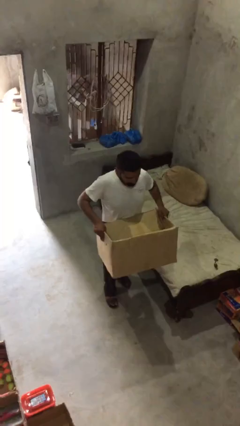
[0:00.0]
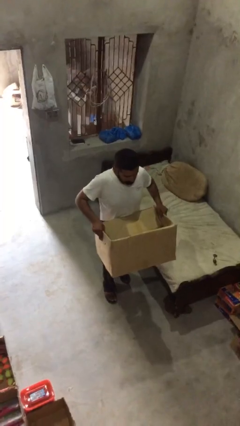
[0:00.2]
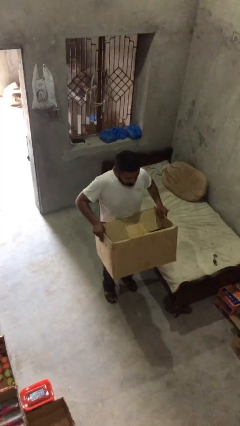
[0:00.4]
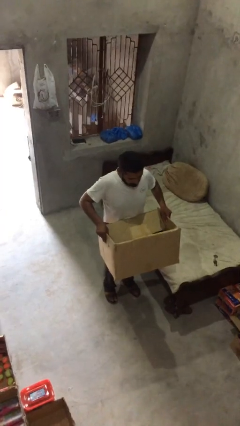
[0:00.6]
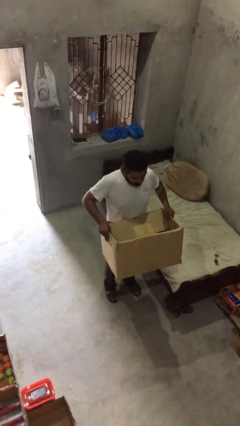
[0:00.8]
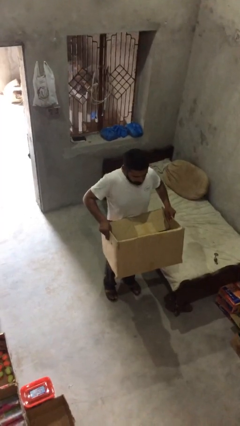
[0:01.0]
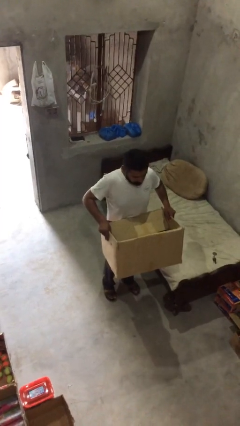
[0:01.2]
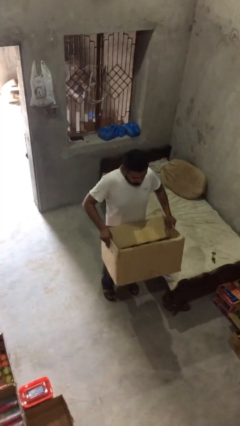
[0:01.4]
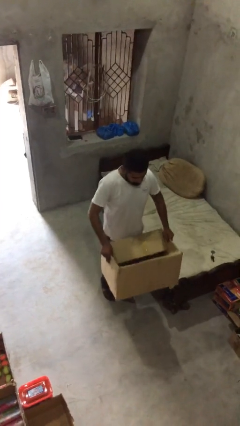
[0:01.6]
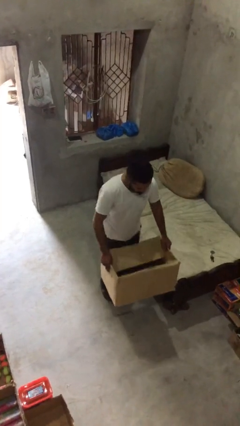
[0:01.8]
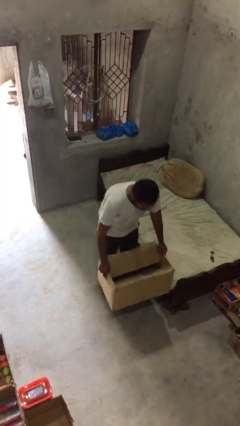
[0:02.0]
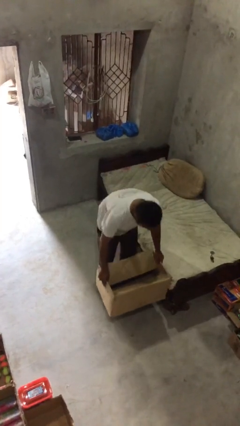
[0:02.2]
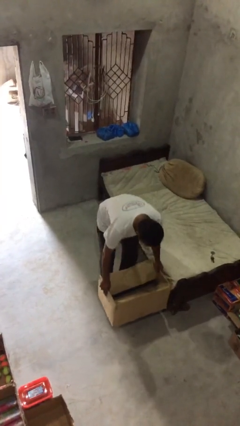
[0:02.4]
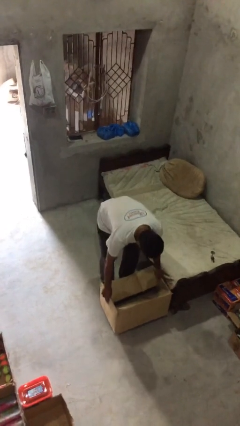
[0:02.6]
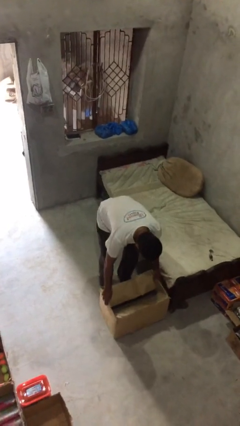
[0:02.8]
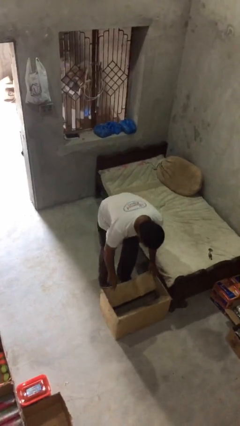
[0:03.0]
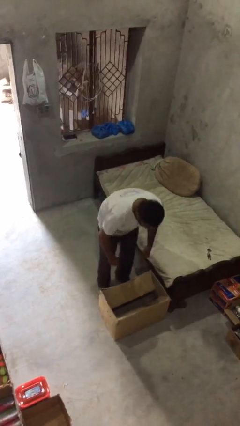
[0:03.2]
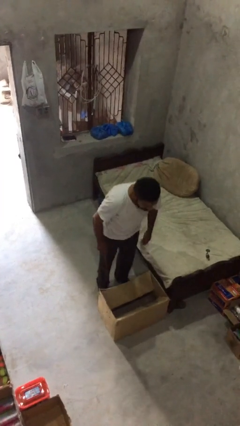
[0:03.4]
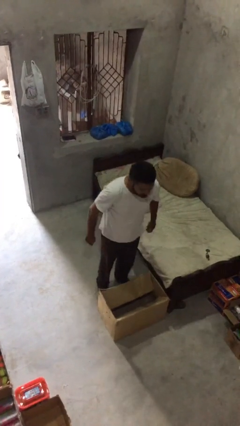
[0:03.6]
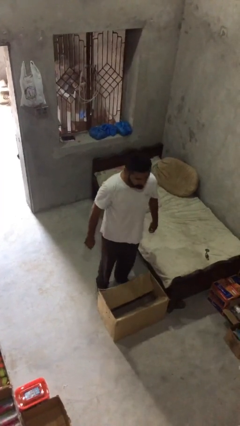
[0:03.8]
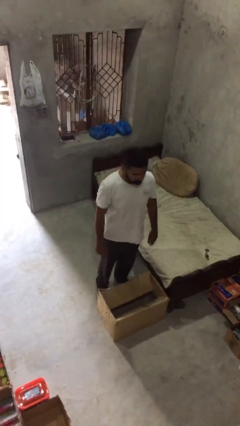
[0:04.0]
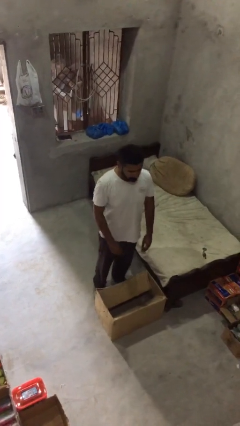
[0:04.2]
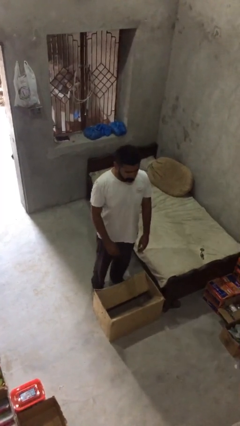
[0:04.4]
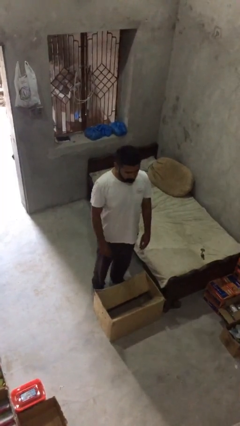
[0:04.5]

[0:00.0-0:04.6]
person puts down object on floor

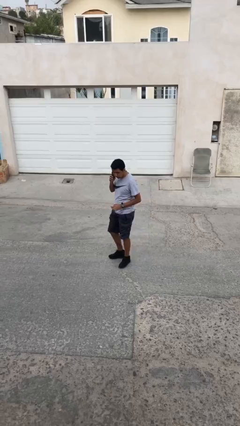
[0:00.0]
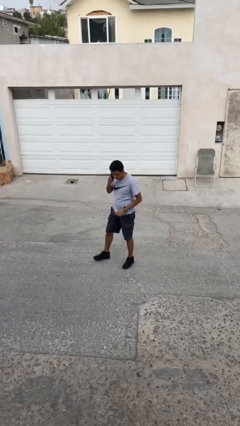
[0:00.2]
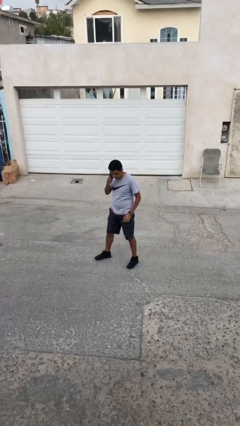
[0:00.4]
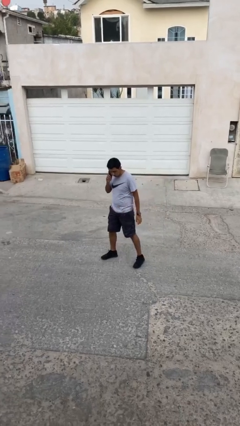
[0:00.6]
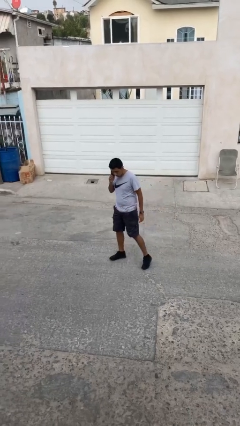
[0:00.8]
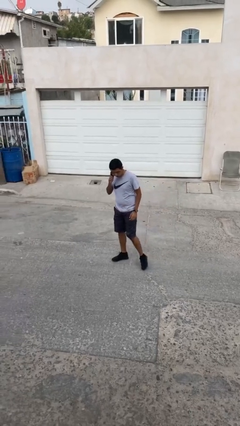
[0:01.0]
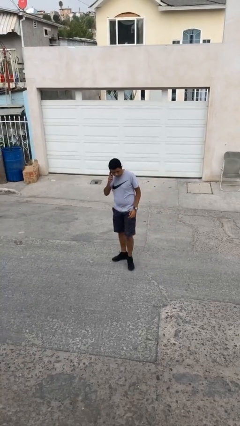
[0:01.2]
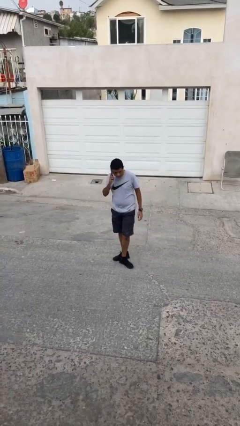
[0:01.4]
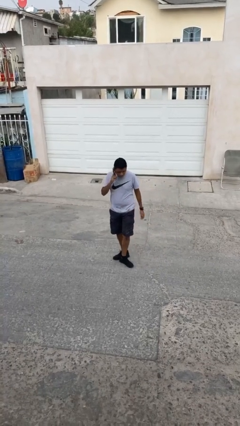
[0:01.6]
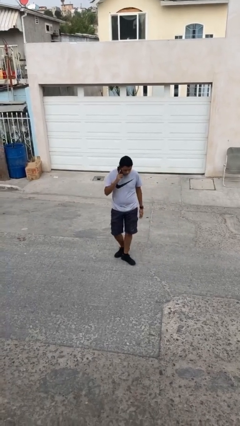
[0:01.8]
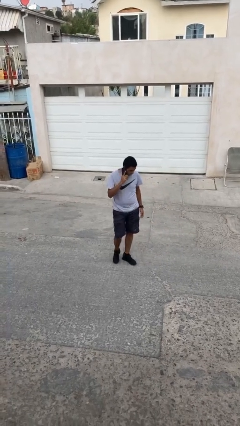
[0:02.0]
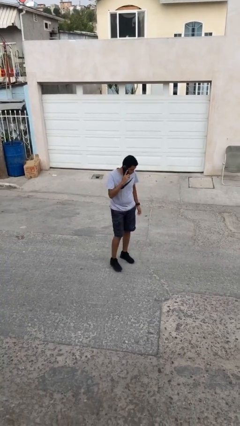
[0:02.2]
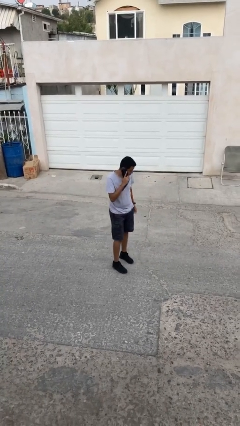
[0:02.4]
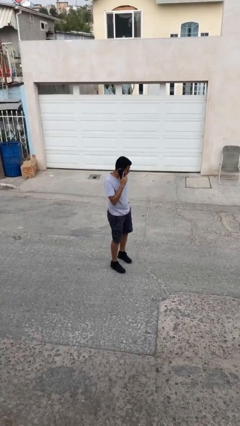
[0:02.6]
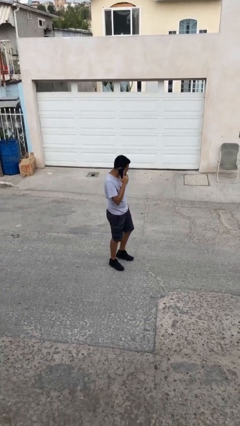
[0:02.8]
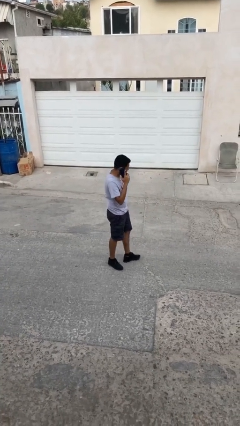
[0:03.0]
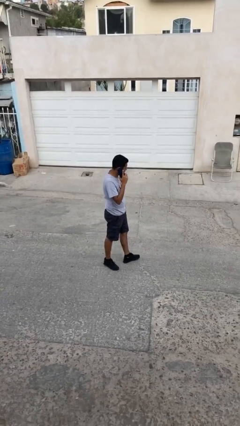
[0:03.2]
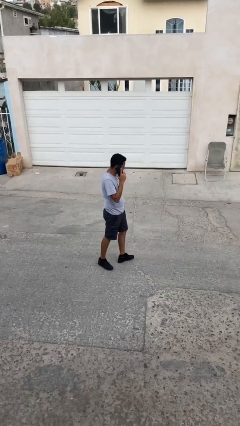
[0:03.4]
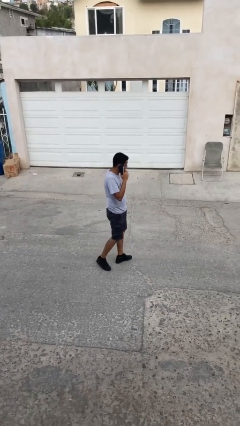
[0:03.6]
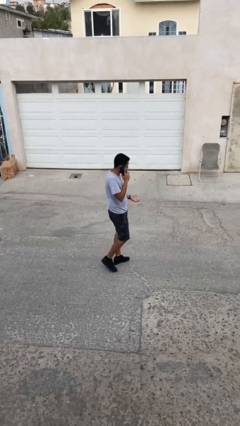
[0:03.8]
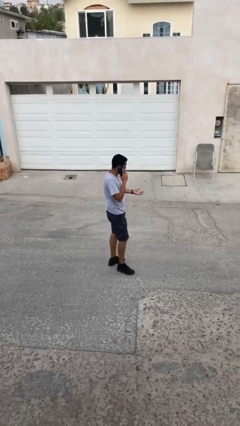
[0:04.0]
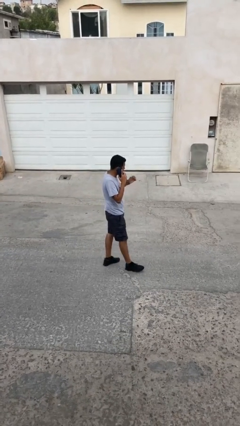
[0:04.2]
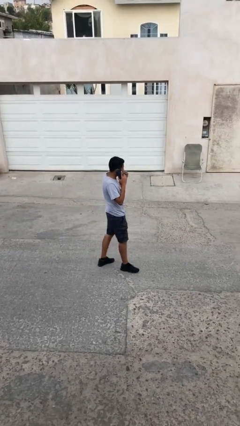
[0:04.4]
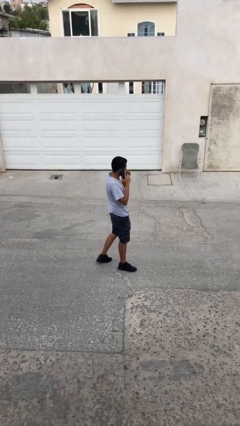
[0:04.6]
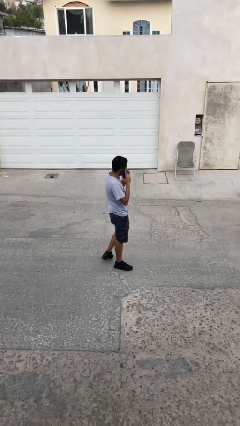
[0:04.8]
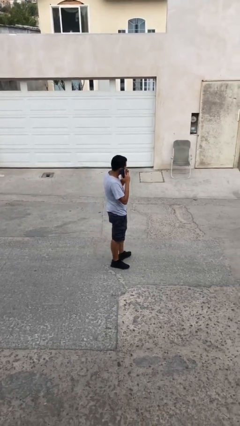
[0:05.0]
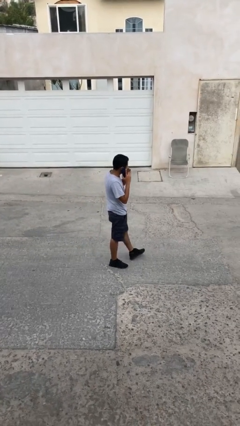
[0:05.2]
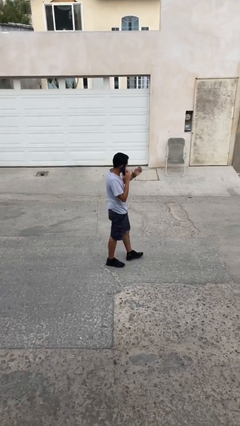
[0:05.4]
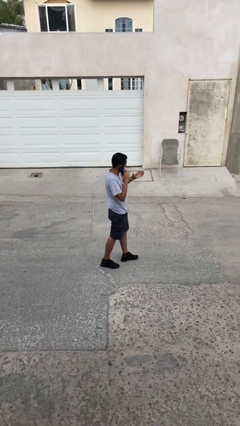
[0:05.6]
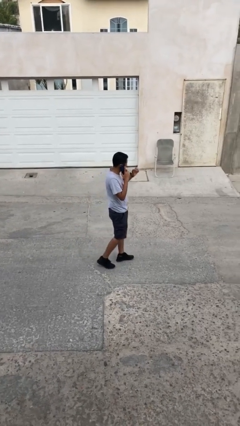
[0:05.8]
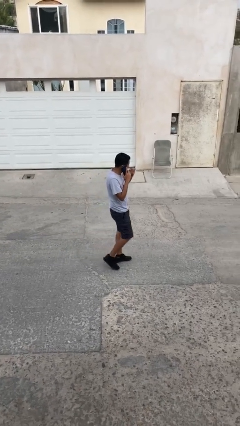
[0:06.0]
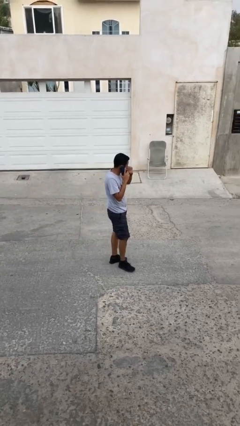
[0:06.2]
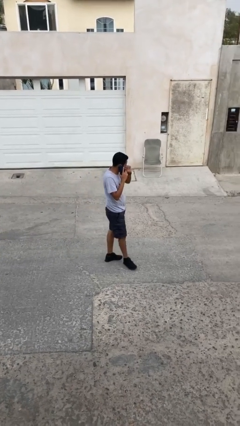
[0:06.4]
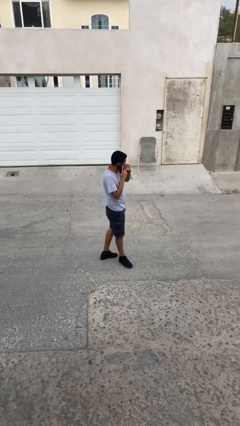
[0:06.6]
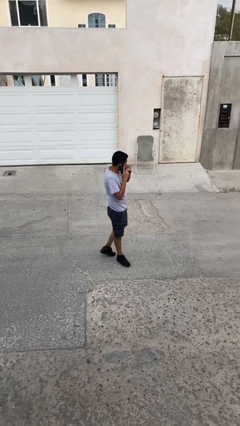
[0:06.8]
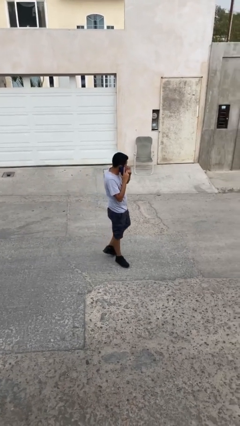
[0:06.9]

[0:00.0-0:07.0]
person talks on phone

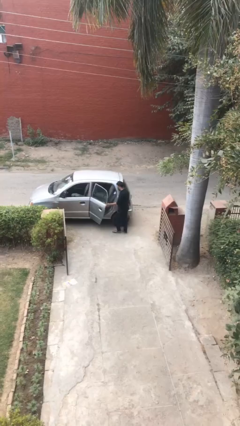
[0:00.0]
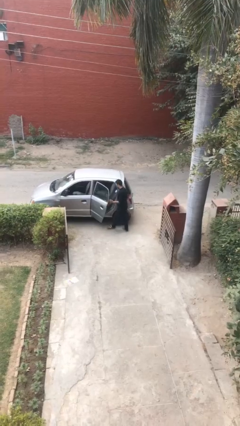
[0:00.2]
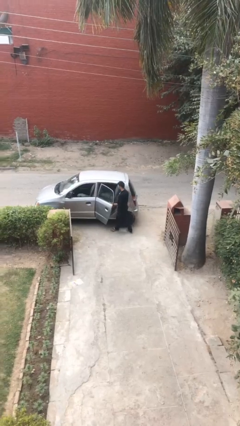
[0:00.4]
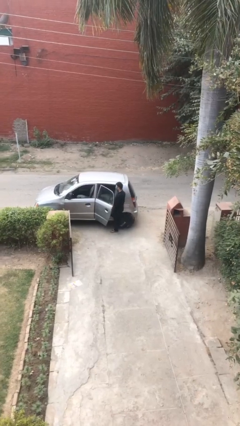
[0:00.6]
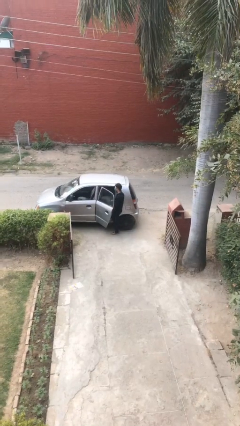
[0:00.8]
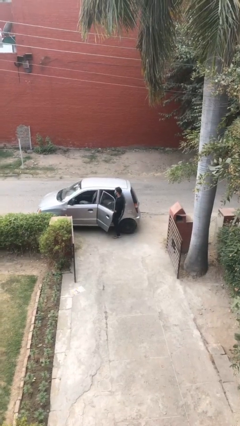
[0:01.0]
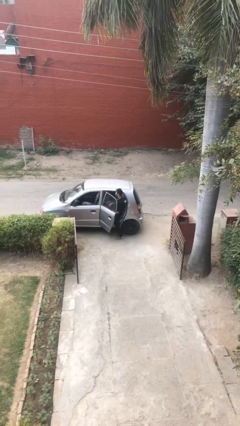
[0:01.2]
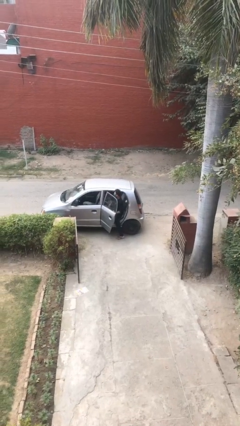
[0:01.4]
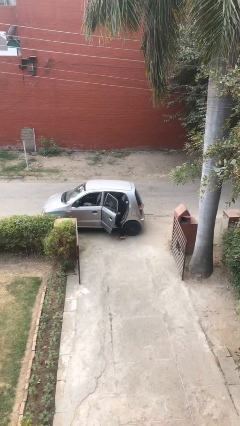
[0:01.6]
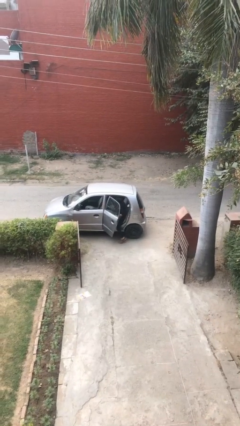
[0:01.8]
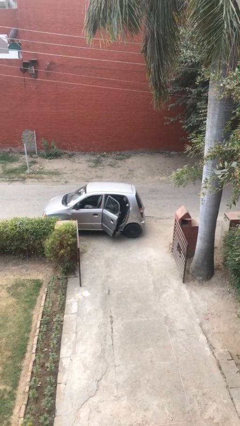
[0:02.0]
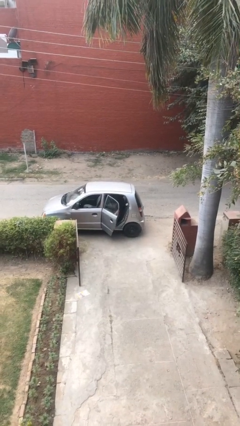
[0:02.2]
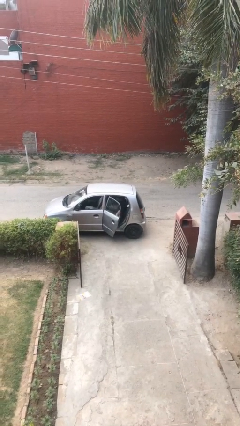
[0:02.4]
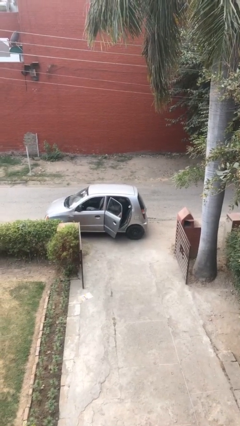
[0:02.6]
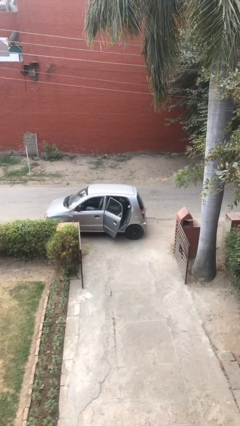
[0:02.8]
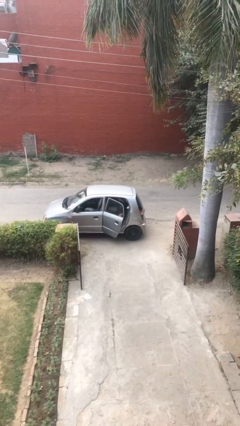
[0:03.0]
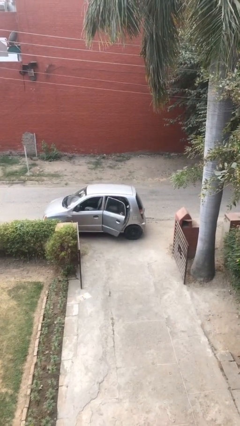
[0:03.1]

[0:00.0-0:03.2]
person enters car

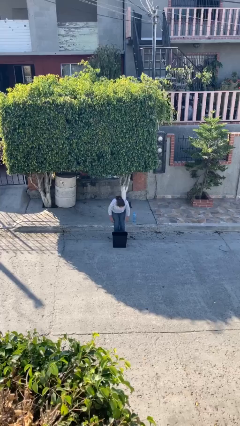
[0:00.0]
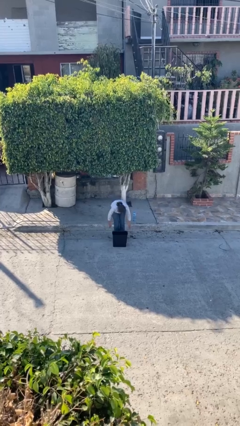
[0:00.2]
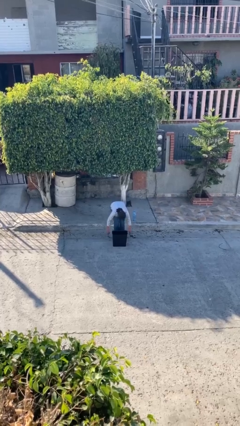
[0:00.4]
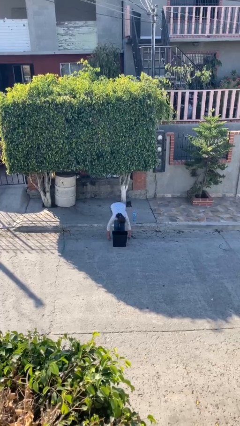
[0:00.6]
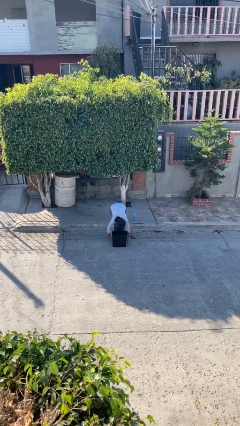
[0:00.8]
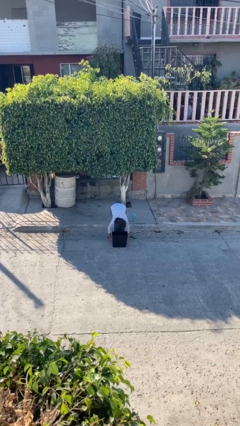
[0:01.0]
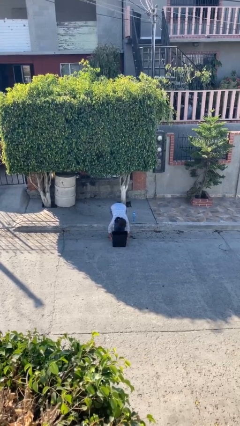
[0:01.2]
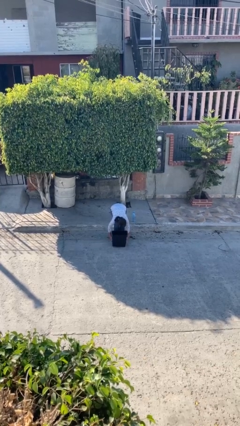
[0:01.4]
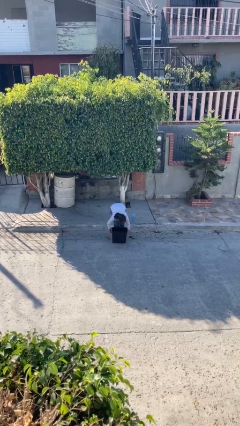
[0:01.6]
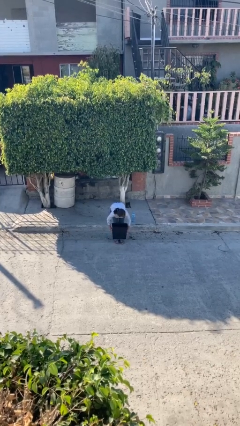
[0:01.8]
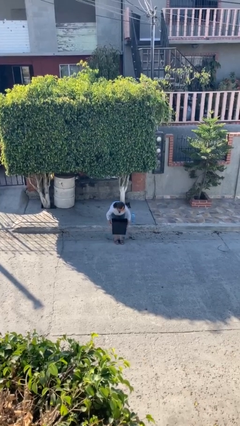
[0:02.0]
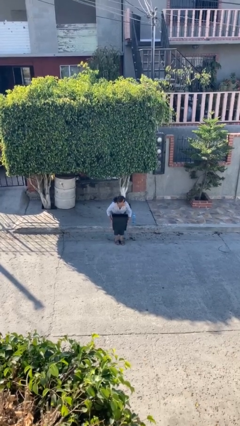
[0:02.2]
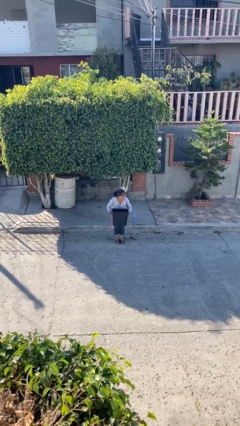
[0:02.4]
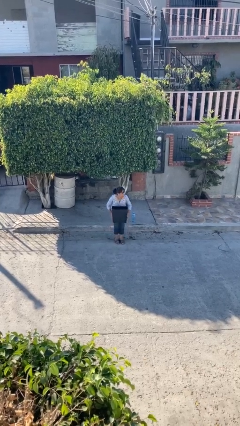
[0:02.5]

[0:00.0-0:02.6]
person picks up object from floor

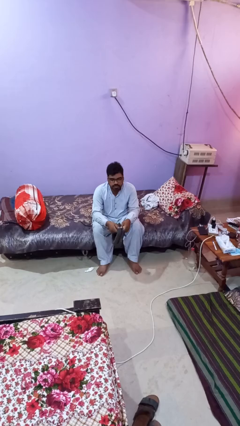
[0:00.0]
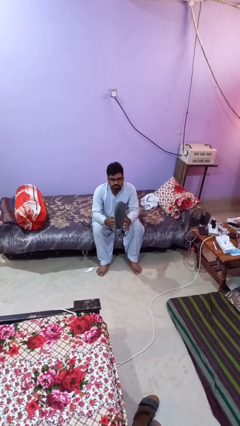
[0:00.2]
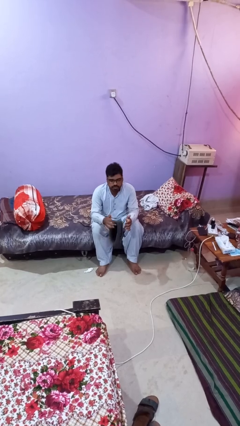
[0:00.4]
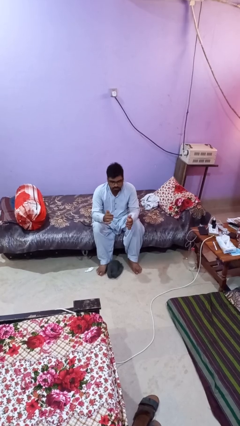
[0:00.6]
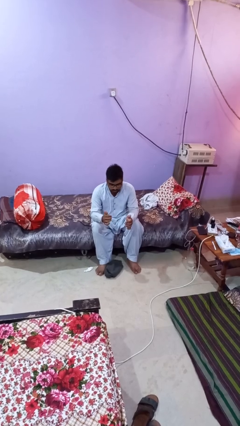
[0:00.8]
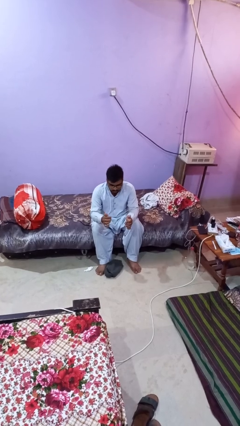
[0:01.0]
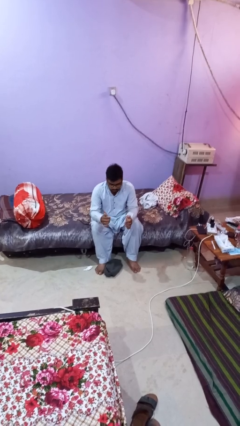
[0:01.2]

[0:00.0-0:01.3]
person drops object
